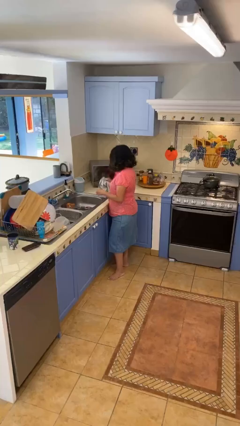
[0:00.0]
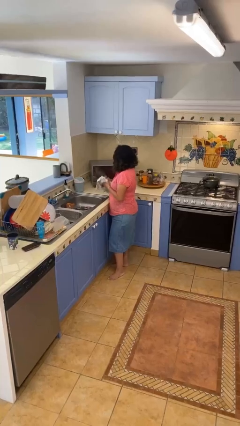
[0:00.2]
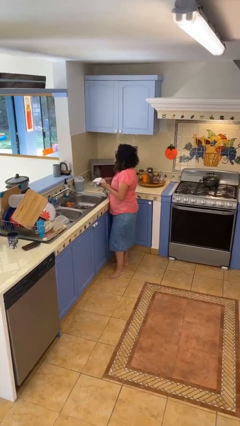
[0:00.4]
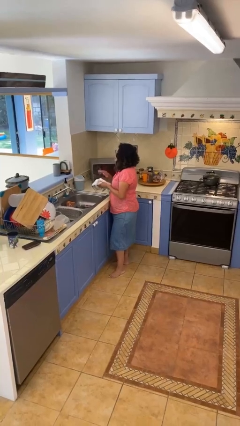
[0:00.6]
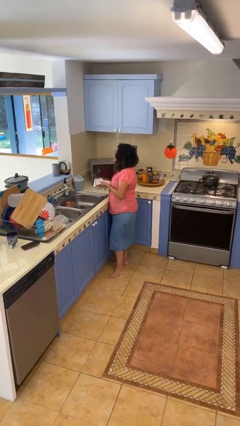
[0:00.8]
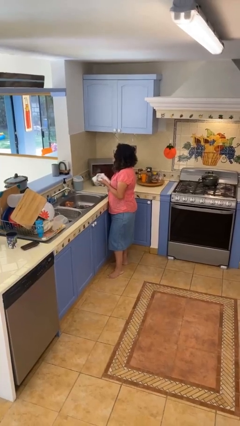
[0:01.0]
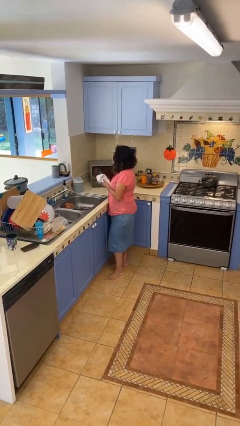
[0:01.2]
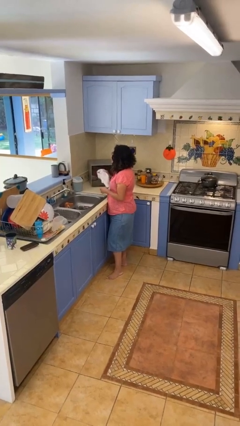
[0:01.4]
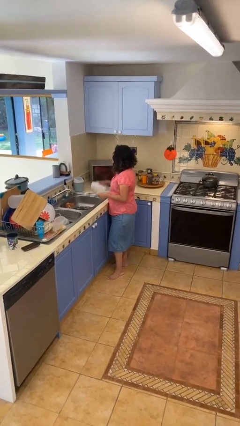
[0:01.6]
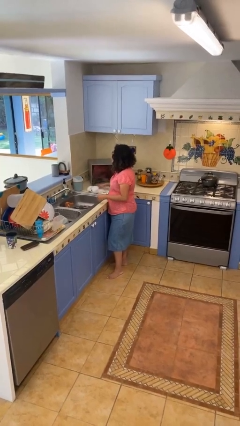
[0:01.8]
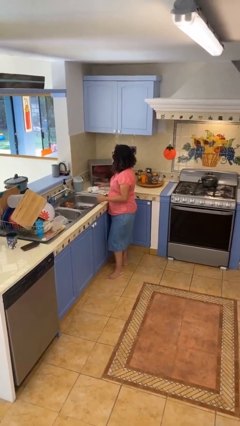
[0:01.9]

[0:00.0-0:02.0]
person dries hands with towel

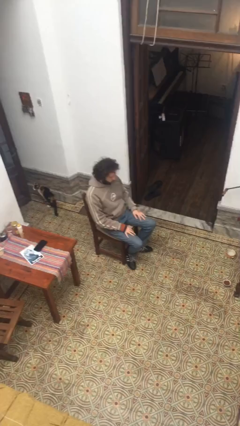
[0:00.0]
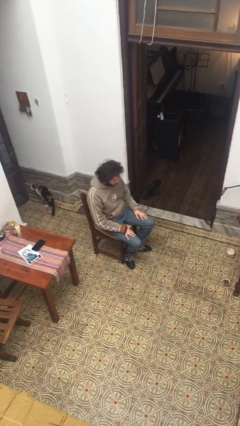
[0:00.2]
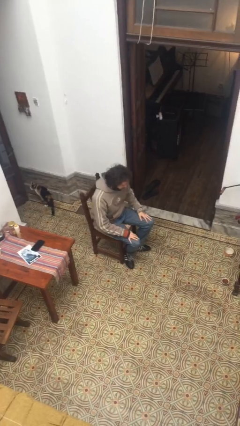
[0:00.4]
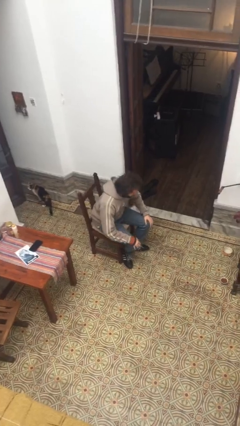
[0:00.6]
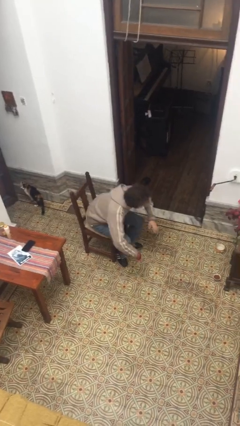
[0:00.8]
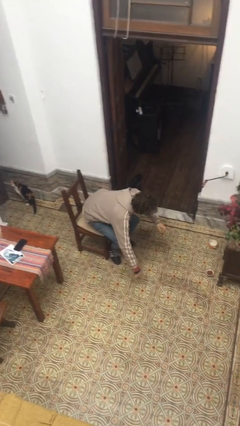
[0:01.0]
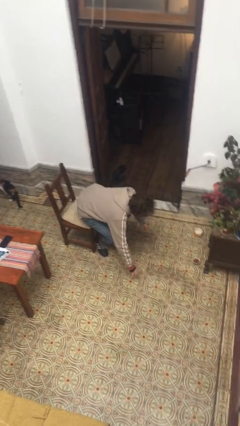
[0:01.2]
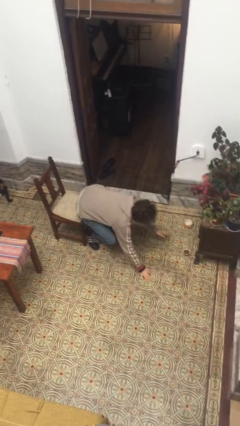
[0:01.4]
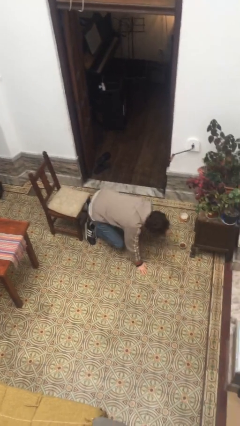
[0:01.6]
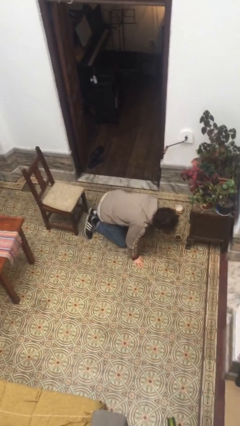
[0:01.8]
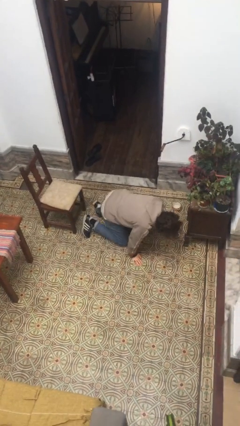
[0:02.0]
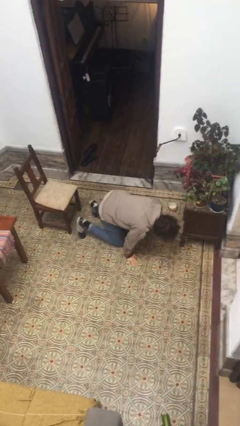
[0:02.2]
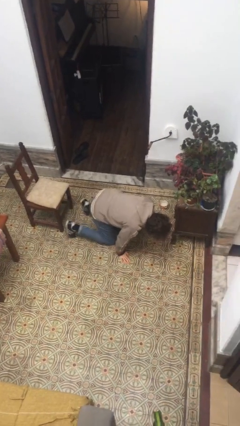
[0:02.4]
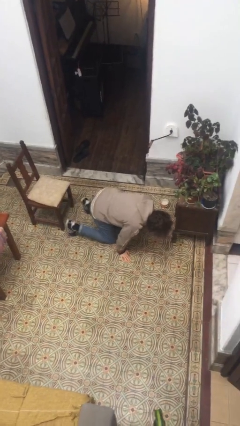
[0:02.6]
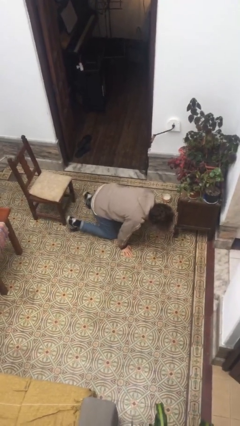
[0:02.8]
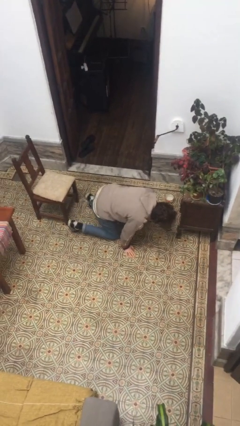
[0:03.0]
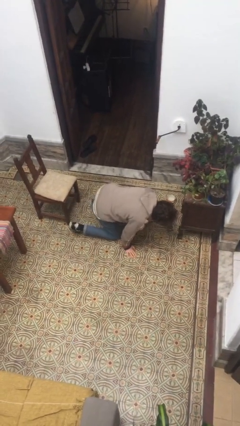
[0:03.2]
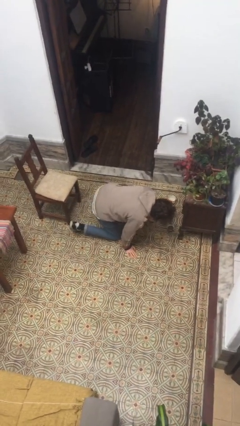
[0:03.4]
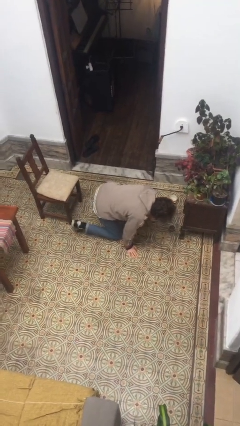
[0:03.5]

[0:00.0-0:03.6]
person falls from chair

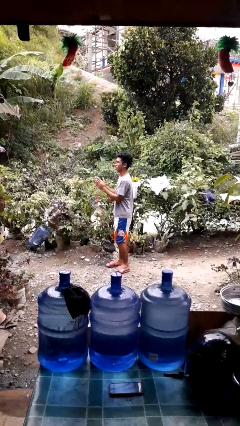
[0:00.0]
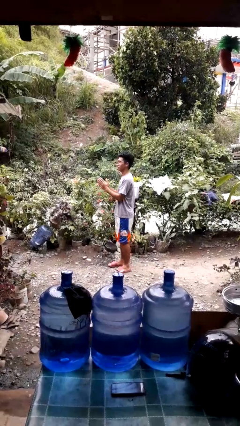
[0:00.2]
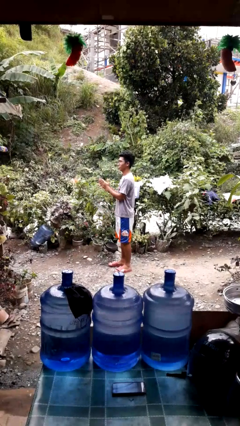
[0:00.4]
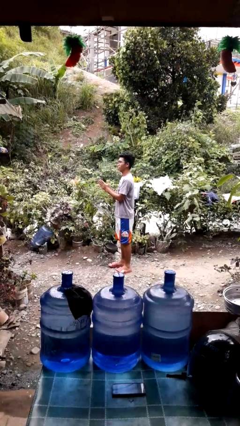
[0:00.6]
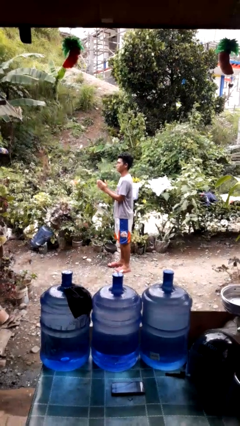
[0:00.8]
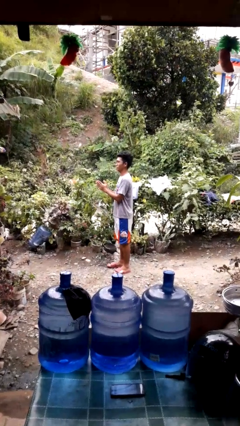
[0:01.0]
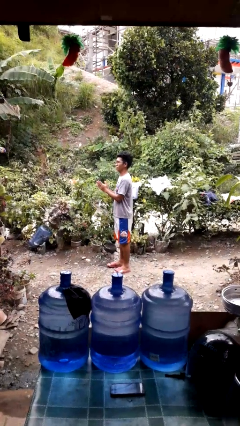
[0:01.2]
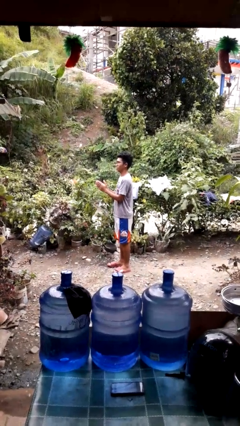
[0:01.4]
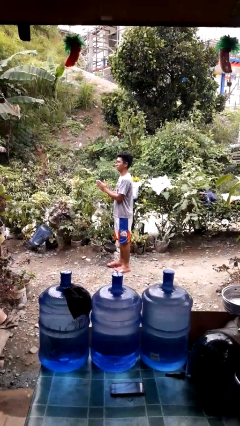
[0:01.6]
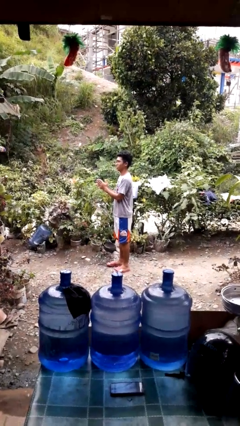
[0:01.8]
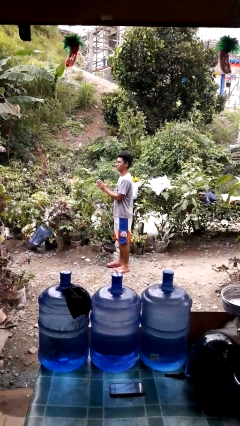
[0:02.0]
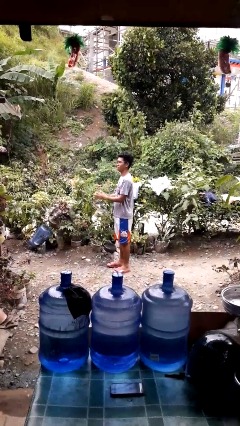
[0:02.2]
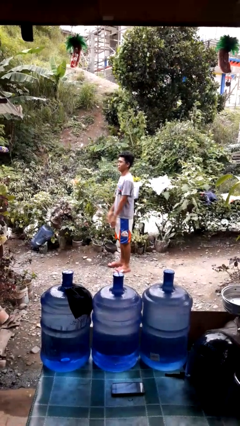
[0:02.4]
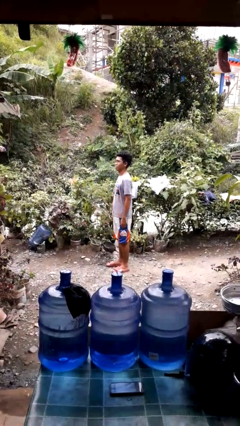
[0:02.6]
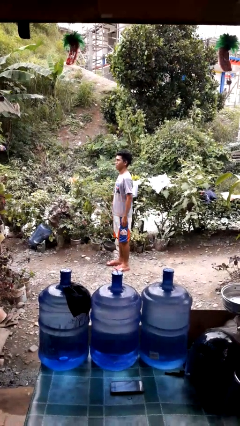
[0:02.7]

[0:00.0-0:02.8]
person claps hands

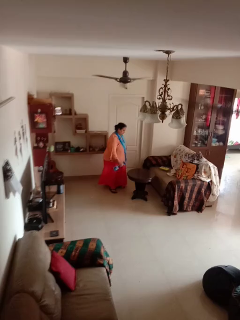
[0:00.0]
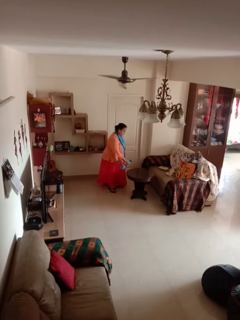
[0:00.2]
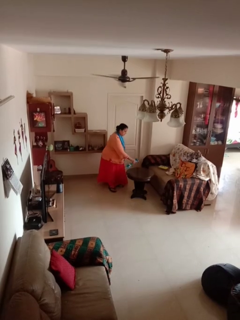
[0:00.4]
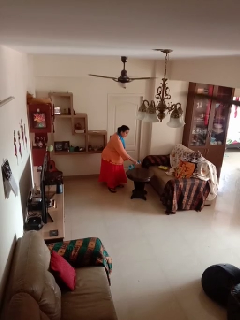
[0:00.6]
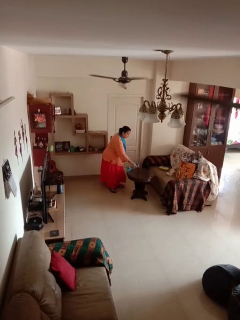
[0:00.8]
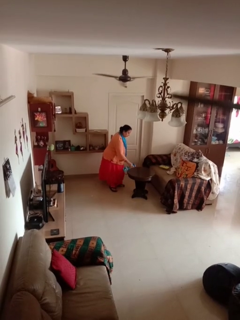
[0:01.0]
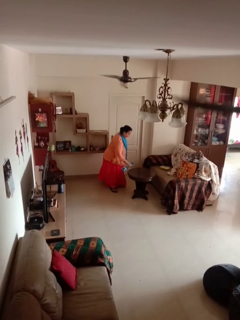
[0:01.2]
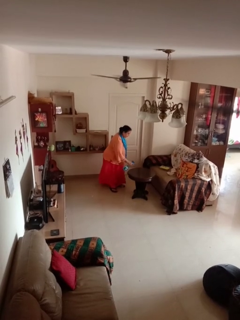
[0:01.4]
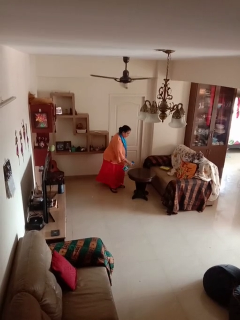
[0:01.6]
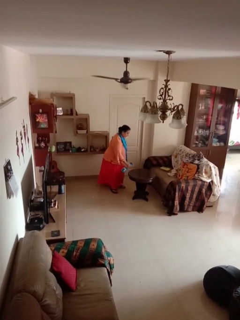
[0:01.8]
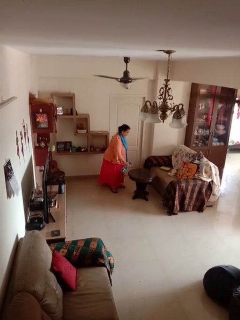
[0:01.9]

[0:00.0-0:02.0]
person sprays from bottle

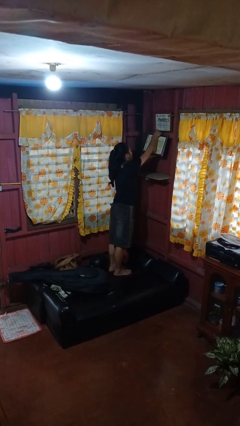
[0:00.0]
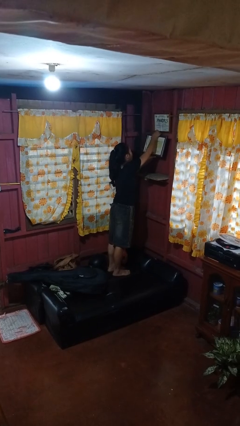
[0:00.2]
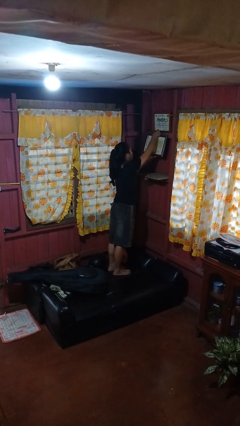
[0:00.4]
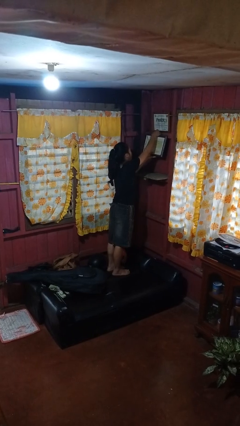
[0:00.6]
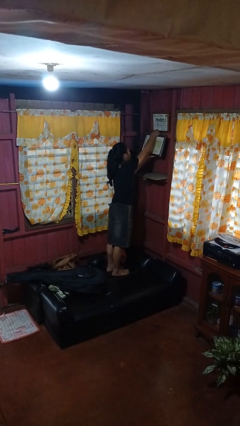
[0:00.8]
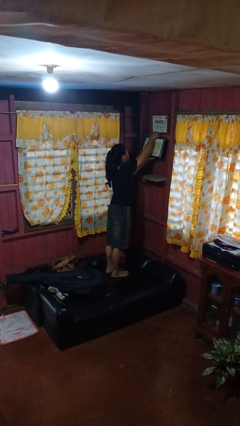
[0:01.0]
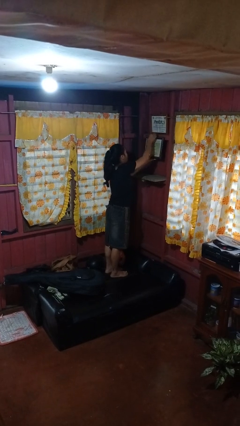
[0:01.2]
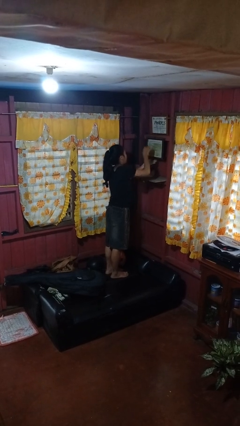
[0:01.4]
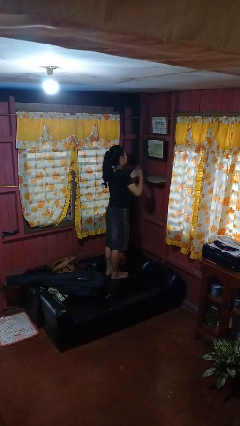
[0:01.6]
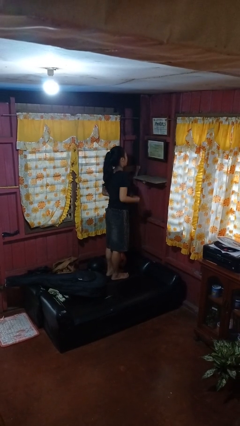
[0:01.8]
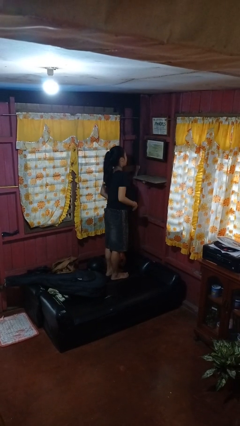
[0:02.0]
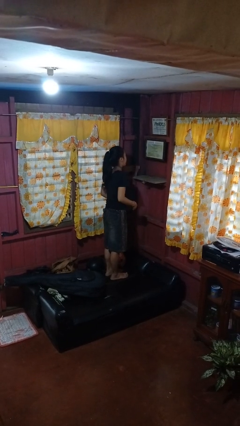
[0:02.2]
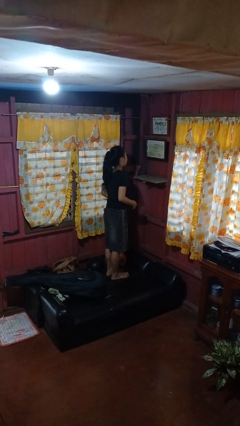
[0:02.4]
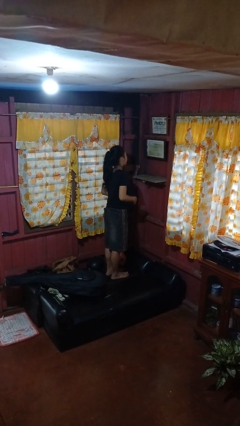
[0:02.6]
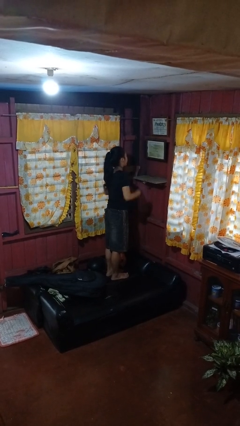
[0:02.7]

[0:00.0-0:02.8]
person puts up picture frame

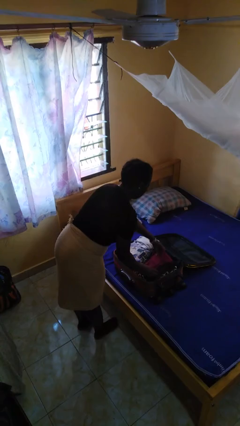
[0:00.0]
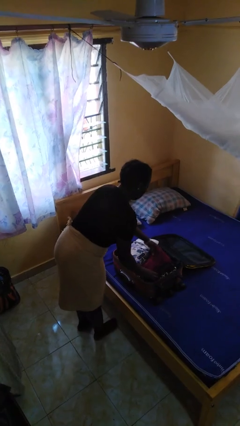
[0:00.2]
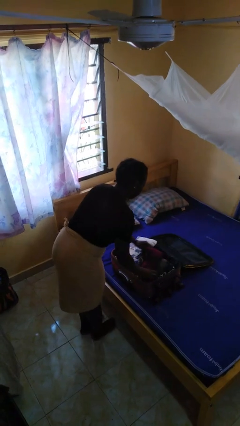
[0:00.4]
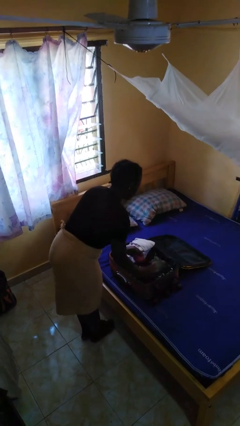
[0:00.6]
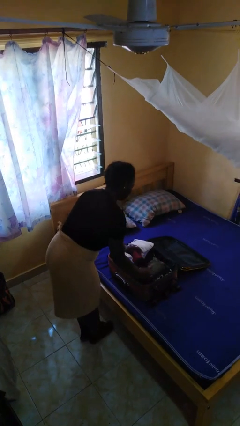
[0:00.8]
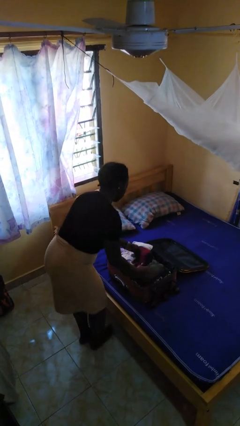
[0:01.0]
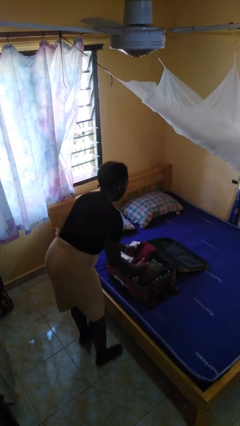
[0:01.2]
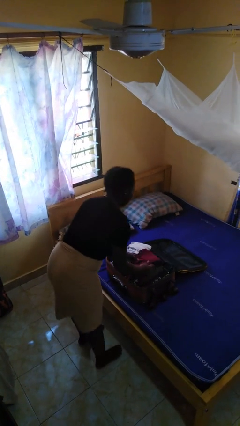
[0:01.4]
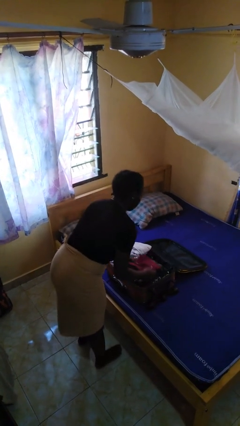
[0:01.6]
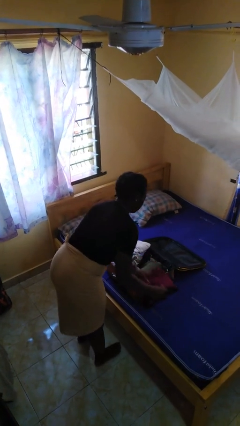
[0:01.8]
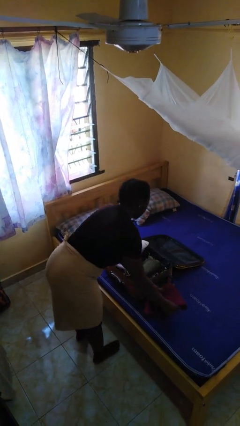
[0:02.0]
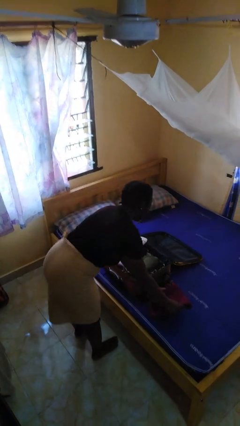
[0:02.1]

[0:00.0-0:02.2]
person unloads clothes from suitcase

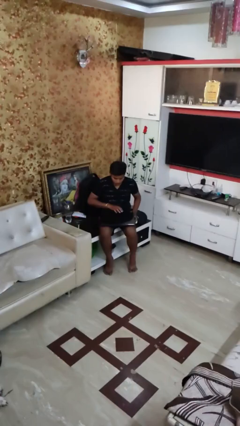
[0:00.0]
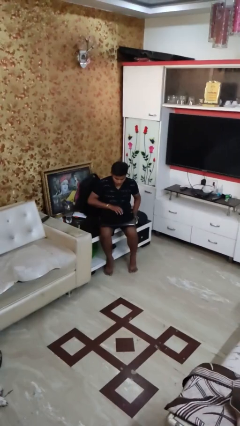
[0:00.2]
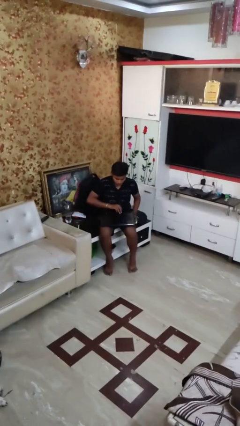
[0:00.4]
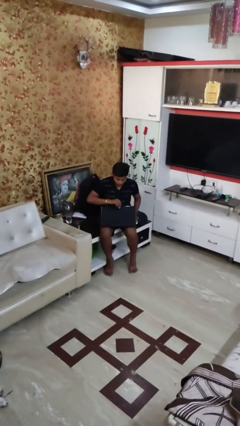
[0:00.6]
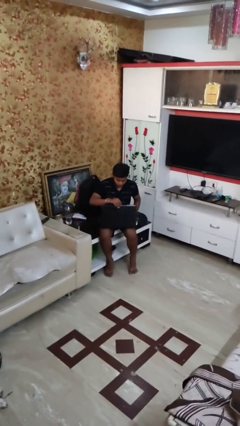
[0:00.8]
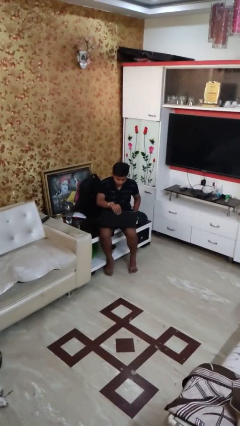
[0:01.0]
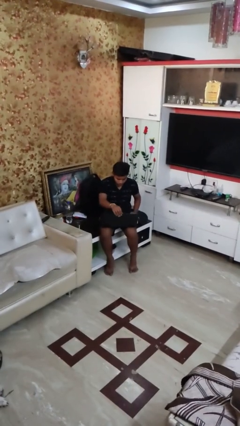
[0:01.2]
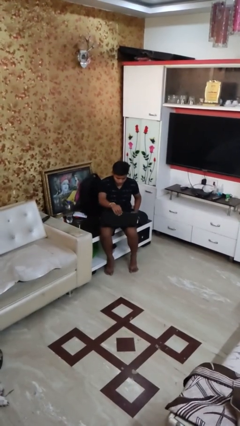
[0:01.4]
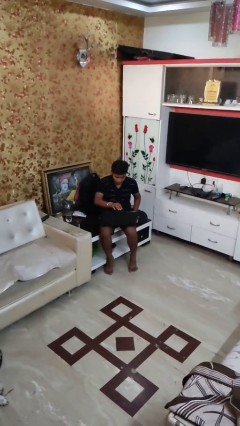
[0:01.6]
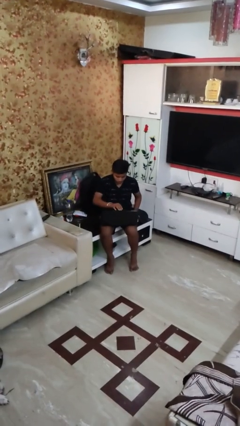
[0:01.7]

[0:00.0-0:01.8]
person opens laptop

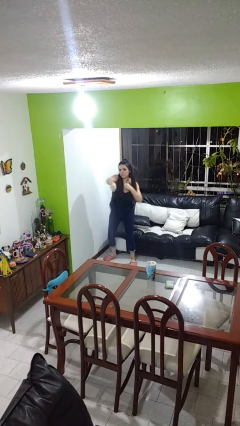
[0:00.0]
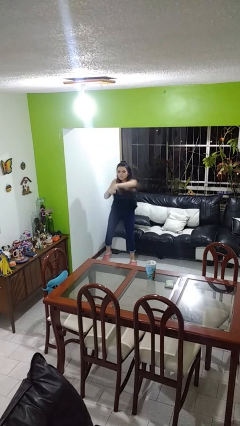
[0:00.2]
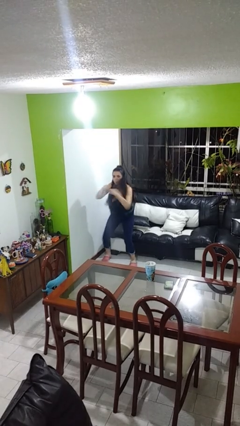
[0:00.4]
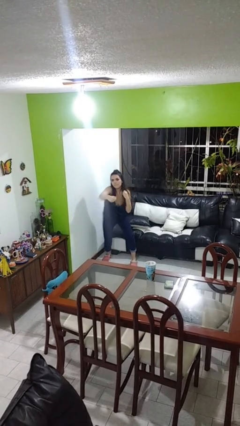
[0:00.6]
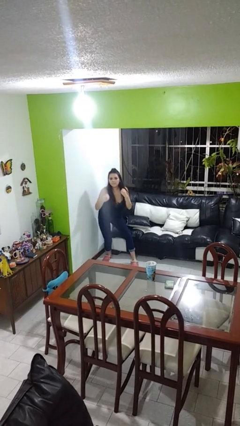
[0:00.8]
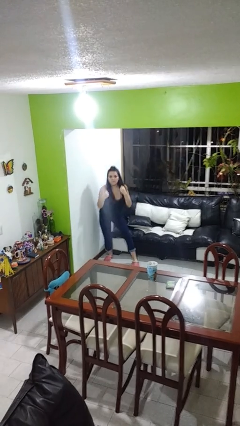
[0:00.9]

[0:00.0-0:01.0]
person punches
